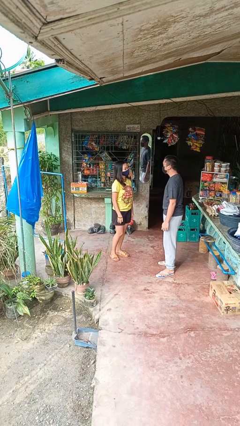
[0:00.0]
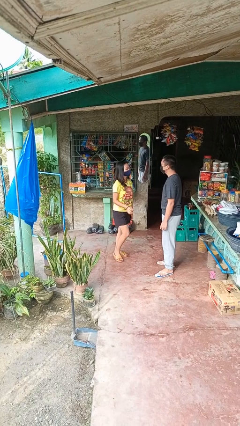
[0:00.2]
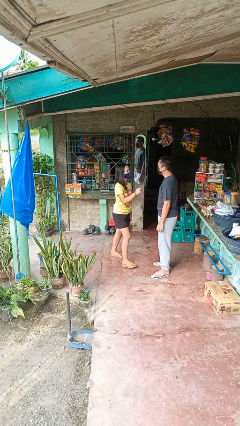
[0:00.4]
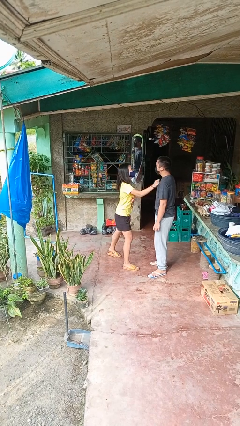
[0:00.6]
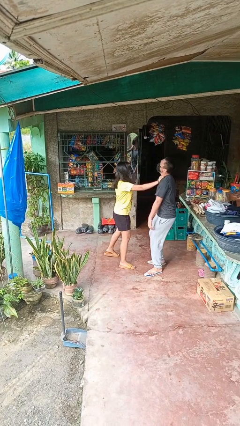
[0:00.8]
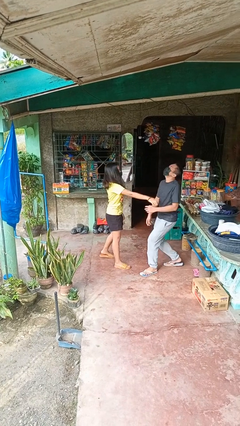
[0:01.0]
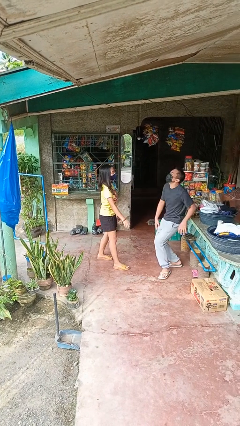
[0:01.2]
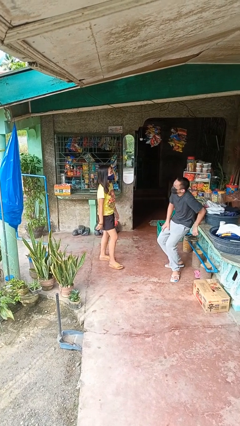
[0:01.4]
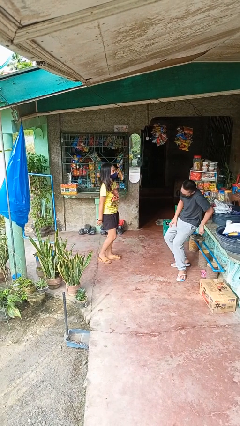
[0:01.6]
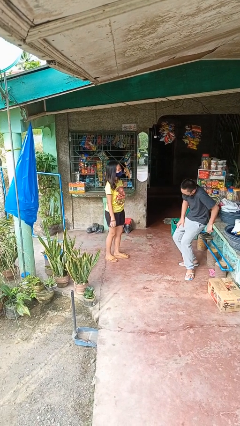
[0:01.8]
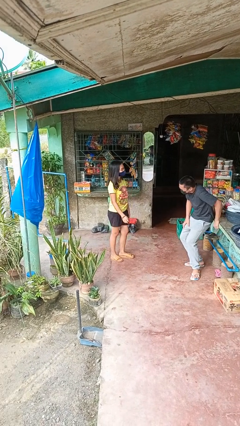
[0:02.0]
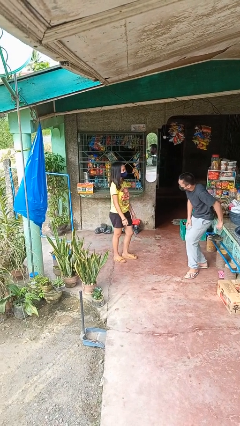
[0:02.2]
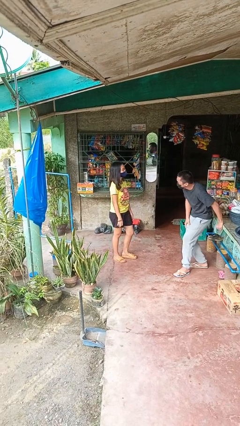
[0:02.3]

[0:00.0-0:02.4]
person shoves person

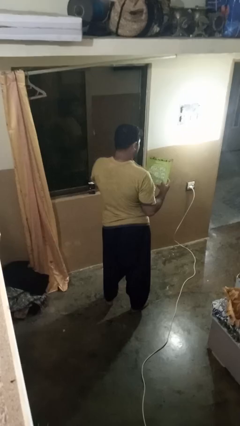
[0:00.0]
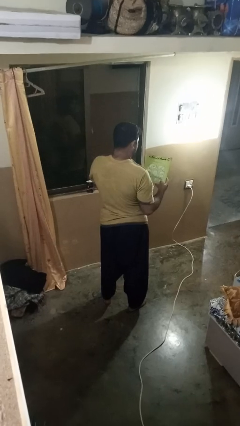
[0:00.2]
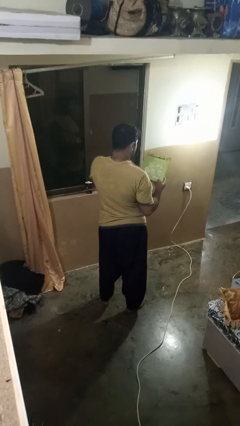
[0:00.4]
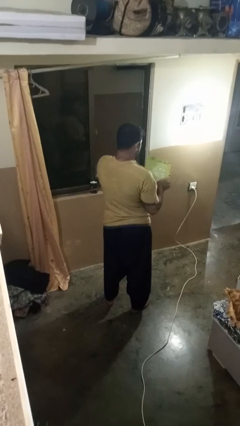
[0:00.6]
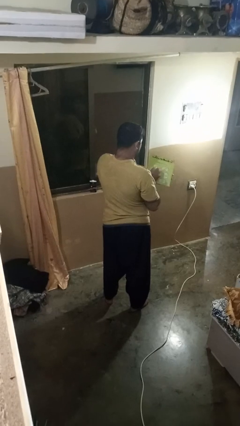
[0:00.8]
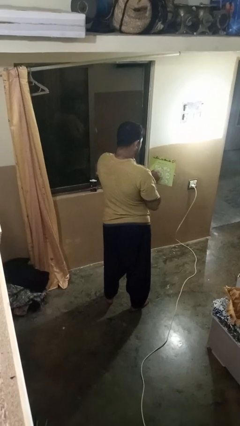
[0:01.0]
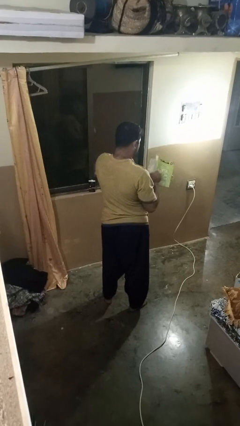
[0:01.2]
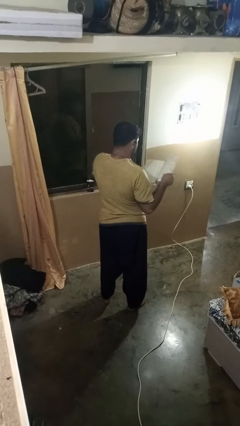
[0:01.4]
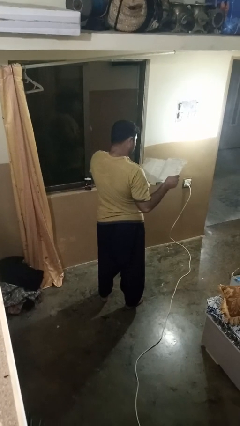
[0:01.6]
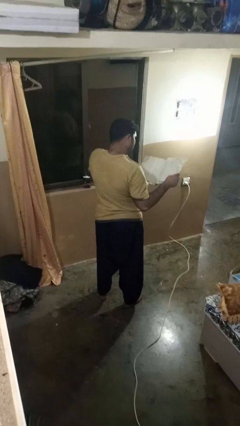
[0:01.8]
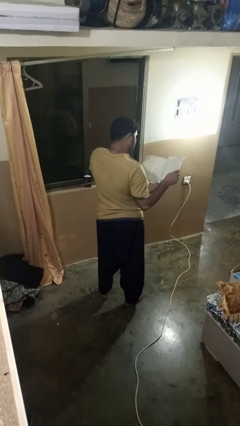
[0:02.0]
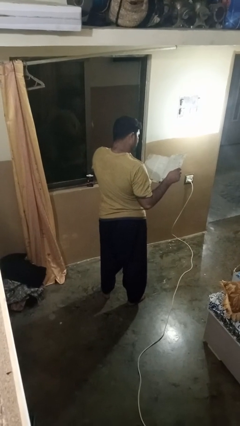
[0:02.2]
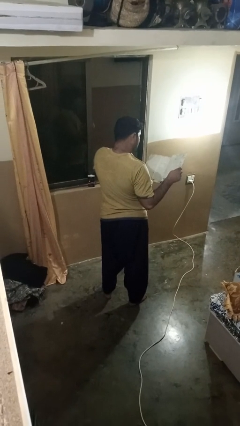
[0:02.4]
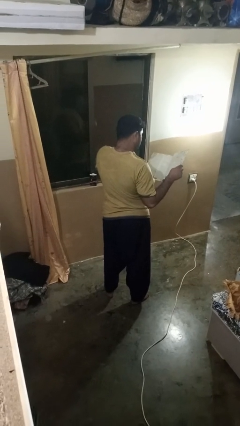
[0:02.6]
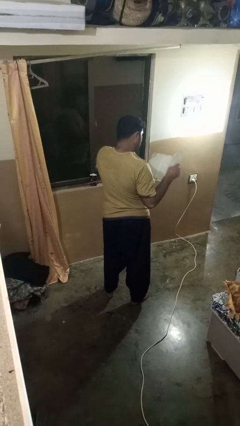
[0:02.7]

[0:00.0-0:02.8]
person reads magazine

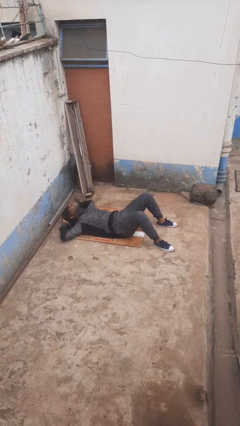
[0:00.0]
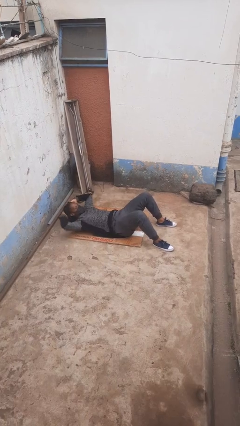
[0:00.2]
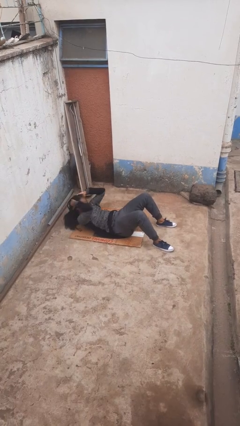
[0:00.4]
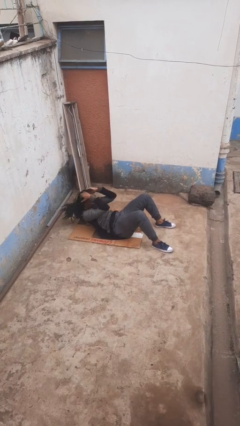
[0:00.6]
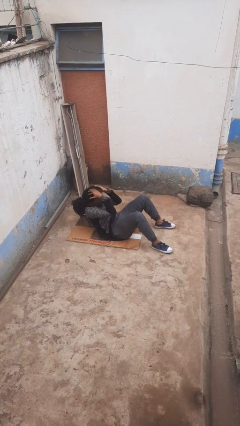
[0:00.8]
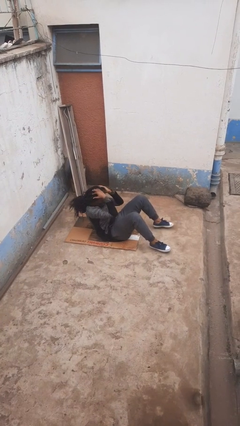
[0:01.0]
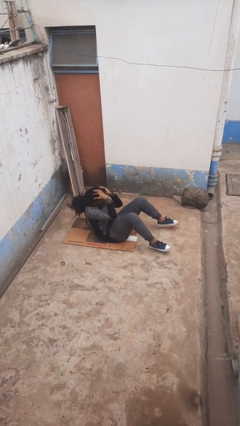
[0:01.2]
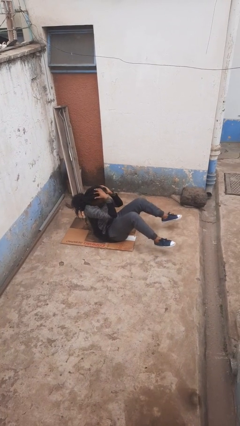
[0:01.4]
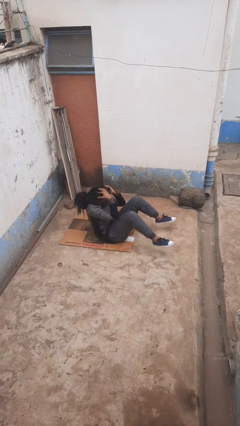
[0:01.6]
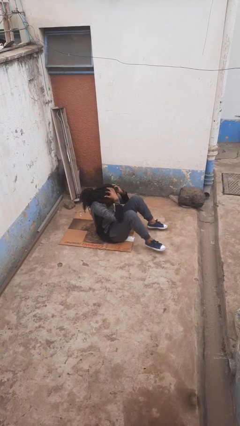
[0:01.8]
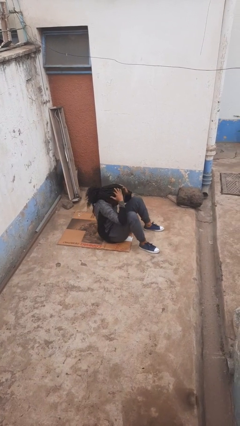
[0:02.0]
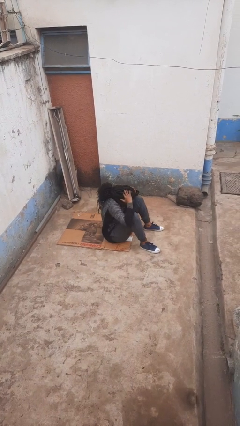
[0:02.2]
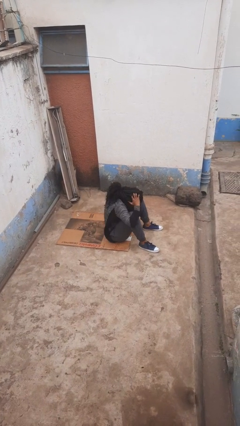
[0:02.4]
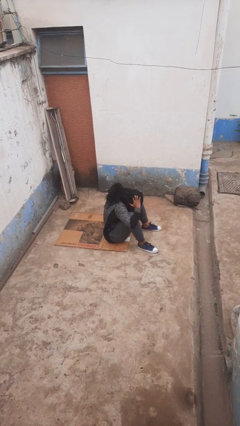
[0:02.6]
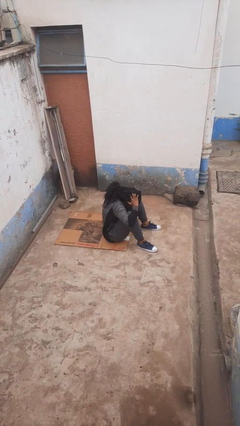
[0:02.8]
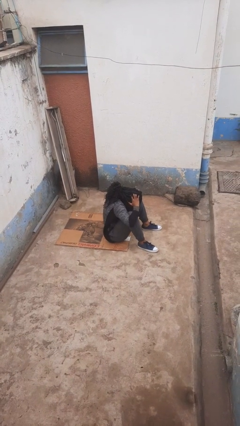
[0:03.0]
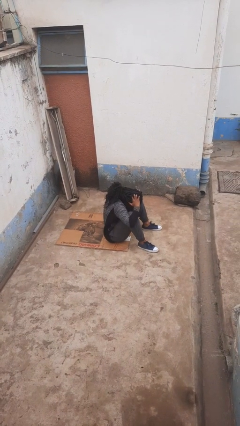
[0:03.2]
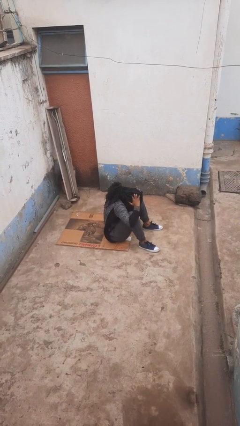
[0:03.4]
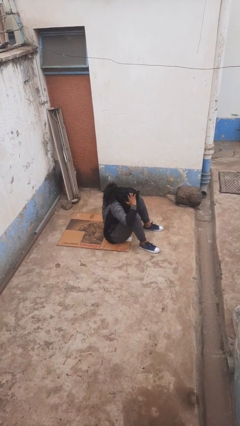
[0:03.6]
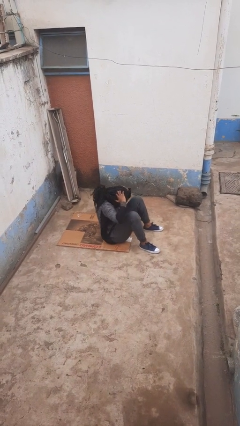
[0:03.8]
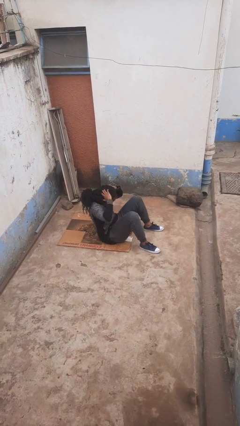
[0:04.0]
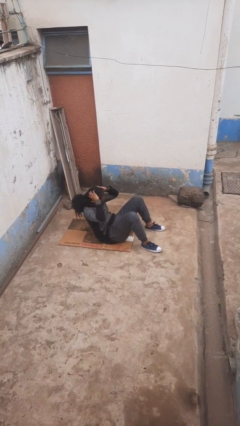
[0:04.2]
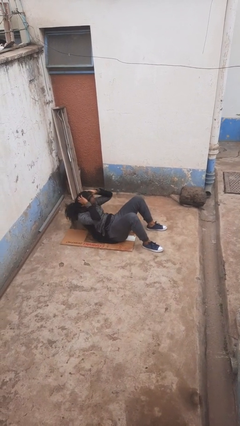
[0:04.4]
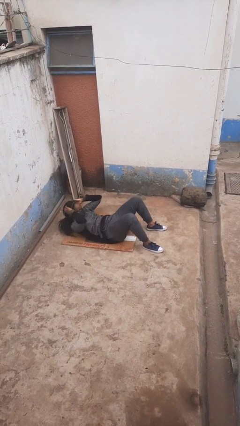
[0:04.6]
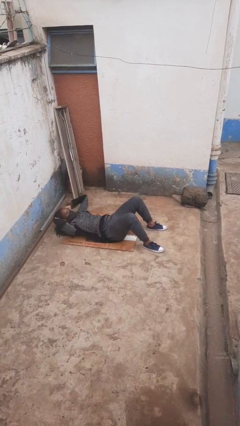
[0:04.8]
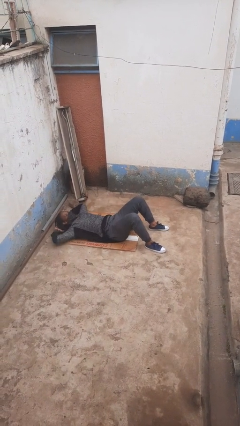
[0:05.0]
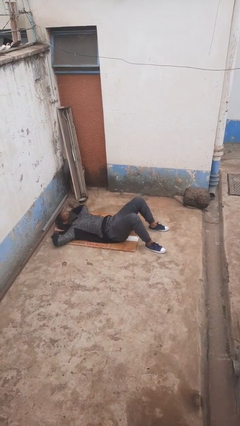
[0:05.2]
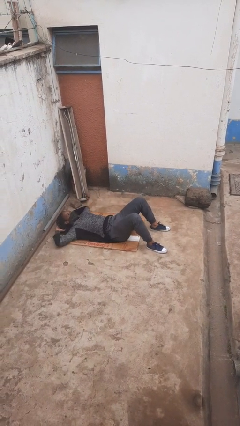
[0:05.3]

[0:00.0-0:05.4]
person exercises with situp

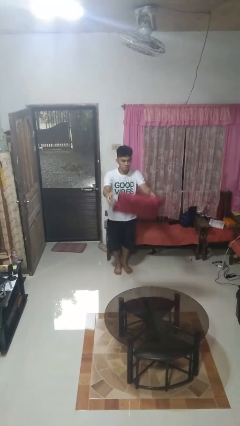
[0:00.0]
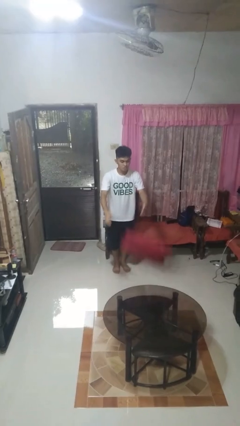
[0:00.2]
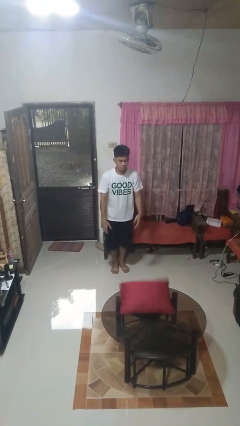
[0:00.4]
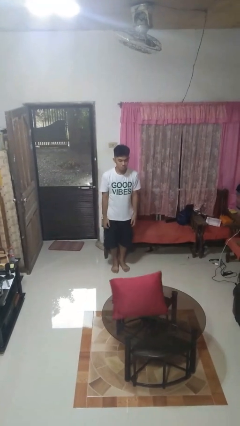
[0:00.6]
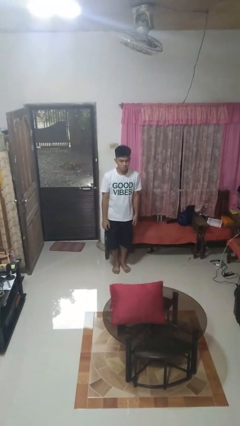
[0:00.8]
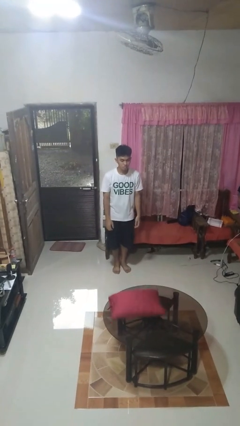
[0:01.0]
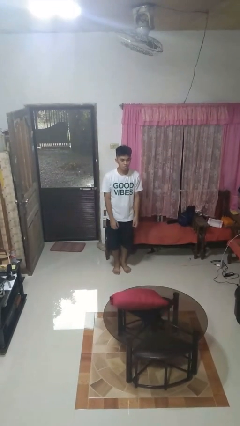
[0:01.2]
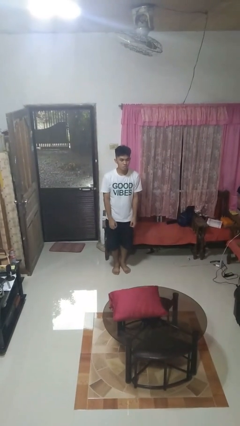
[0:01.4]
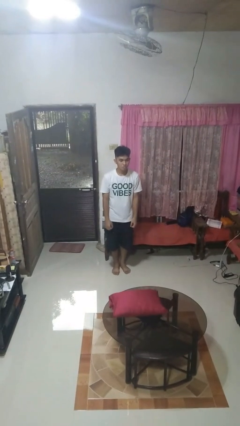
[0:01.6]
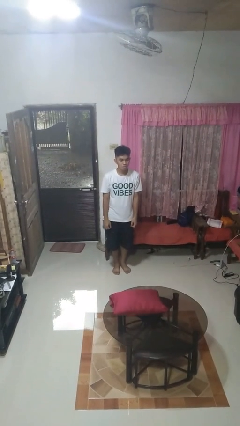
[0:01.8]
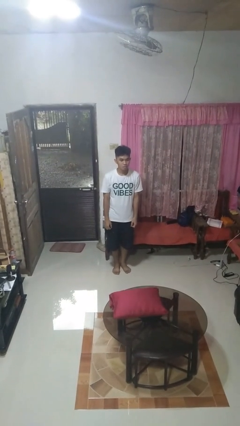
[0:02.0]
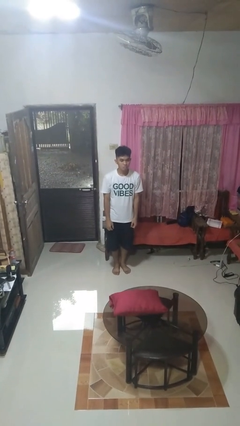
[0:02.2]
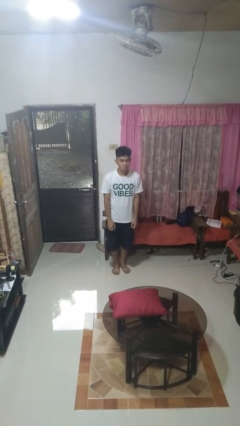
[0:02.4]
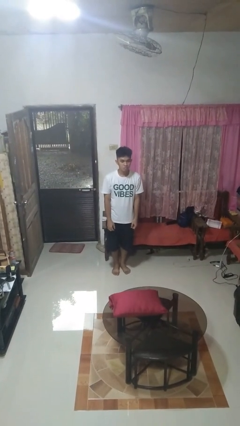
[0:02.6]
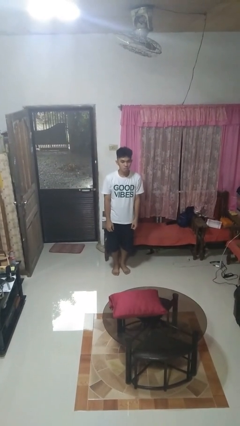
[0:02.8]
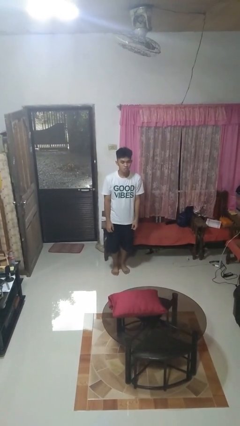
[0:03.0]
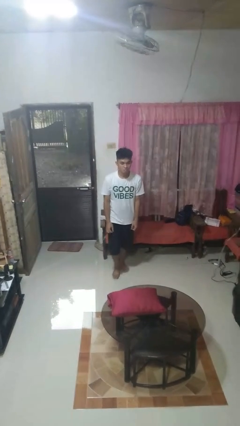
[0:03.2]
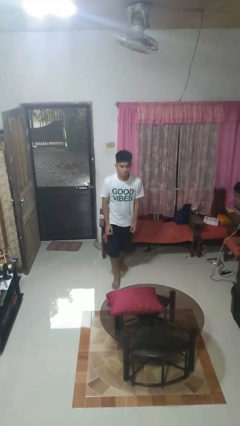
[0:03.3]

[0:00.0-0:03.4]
person throws object on table

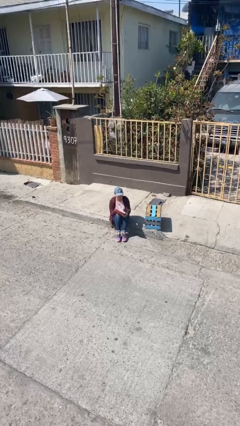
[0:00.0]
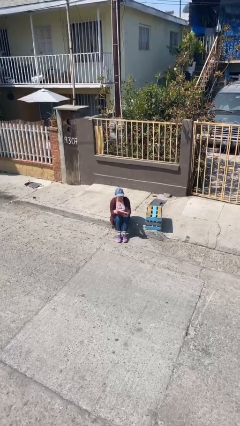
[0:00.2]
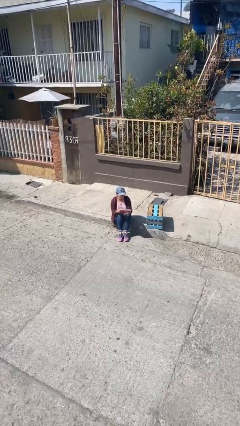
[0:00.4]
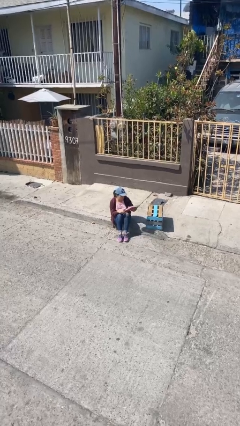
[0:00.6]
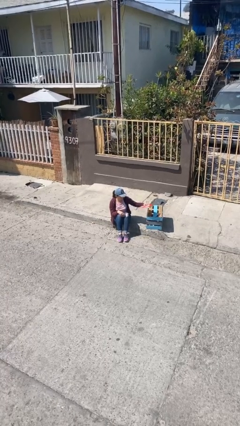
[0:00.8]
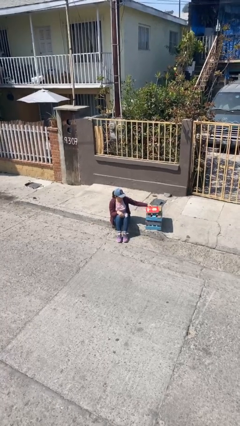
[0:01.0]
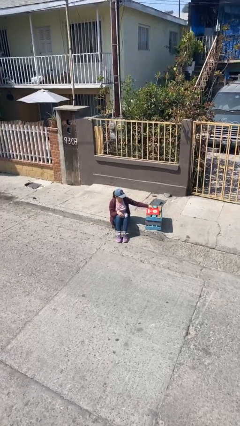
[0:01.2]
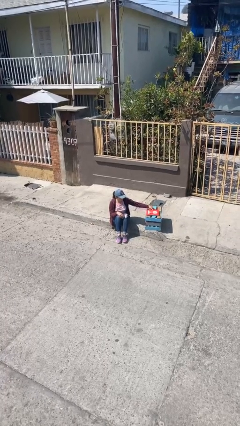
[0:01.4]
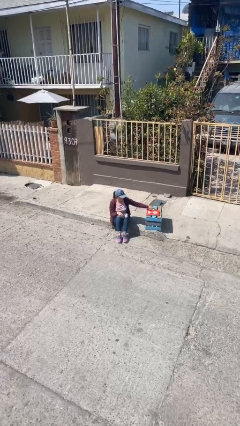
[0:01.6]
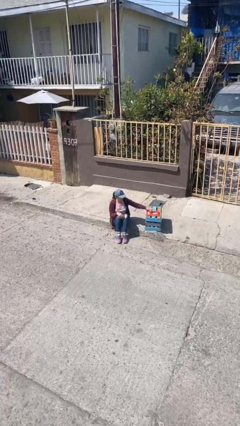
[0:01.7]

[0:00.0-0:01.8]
person puts down object on table

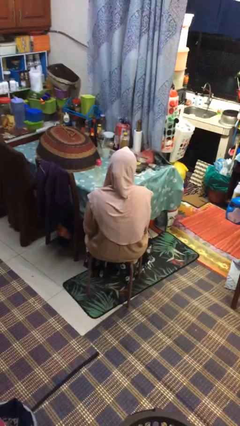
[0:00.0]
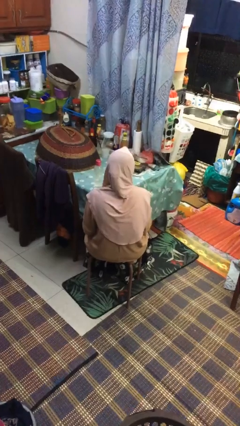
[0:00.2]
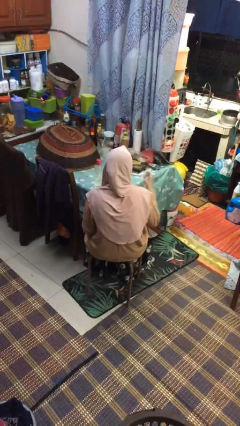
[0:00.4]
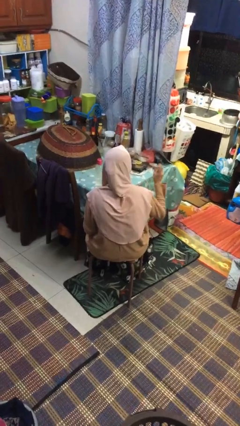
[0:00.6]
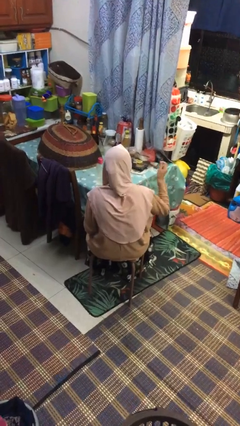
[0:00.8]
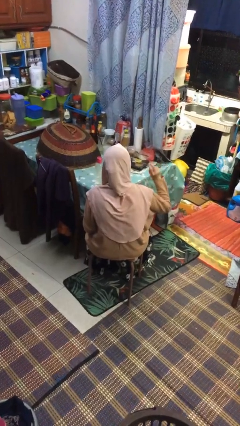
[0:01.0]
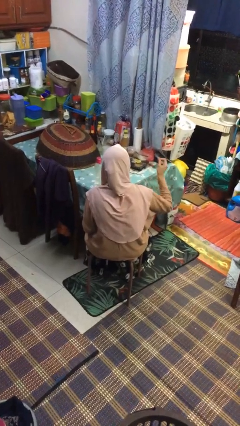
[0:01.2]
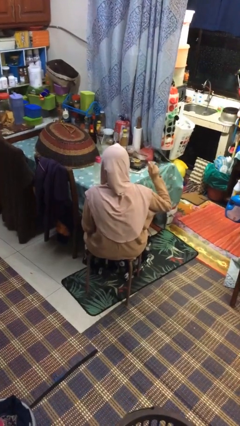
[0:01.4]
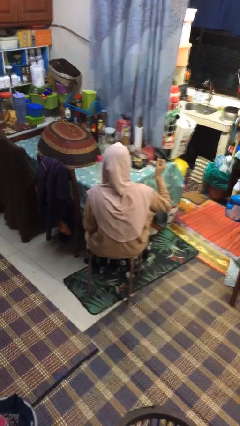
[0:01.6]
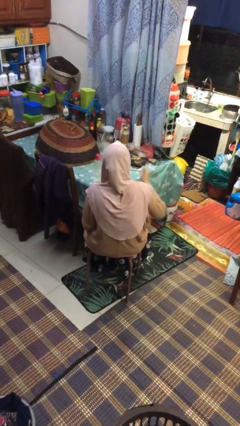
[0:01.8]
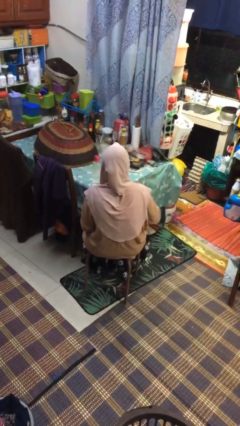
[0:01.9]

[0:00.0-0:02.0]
person snaps fingers
